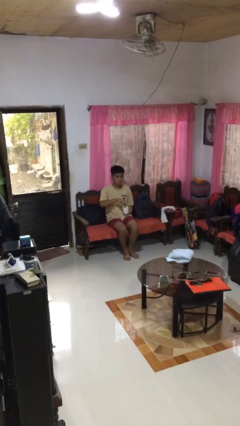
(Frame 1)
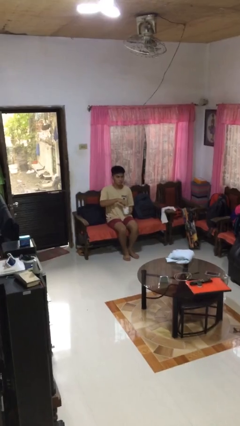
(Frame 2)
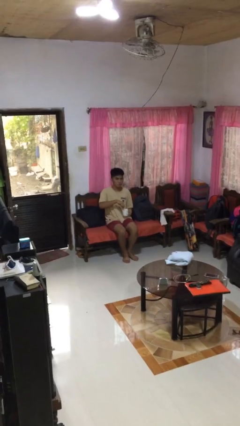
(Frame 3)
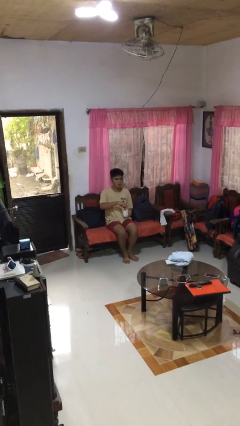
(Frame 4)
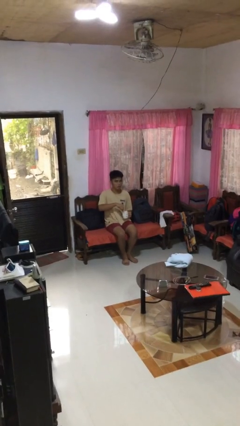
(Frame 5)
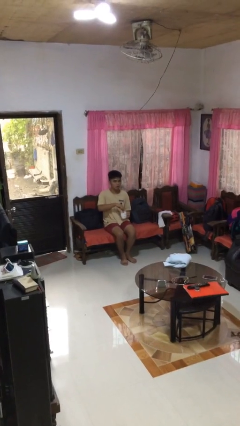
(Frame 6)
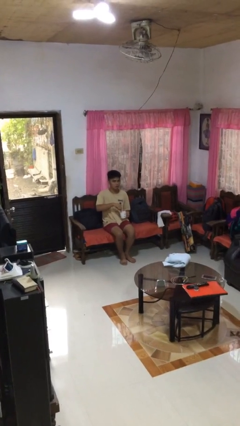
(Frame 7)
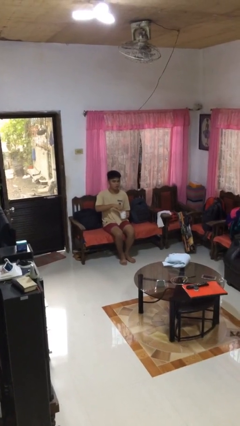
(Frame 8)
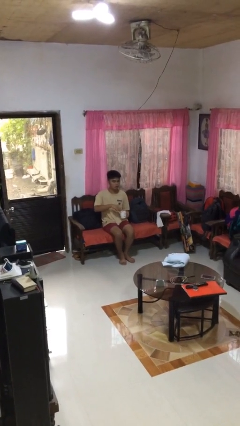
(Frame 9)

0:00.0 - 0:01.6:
person stirs mug

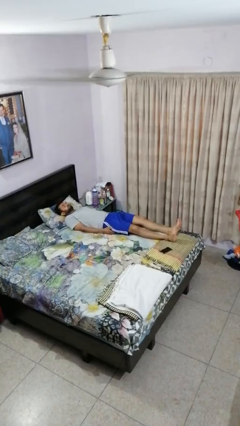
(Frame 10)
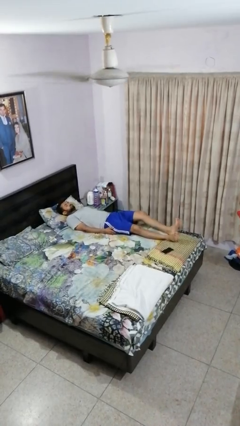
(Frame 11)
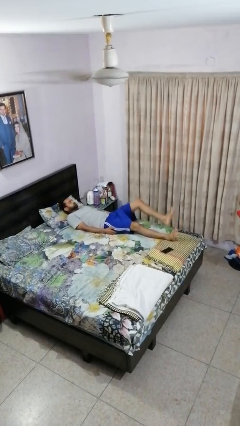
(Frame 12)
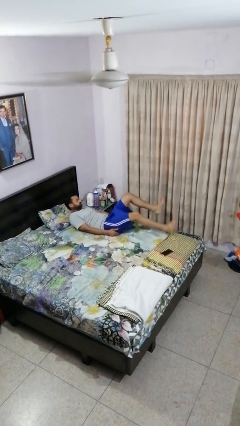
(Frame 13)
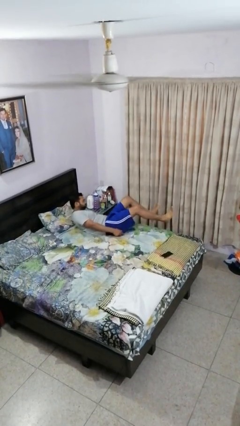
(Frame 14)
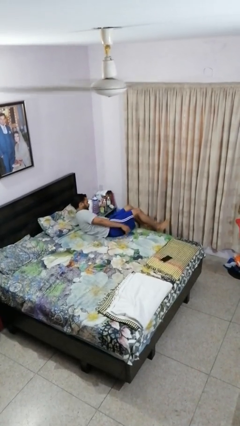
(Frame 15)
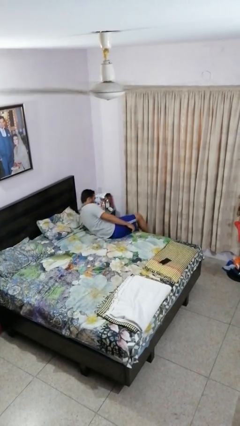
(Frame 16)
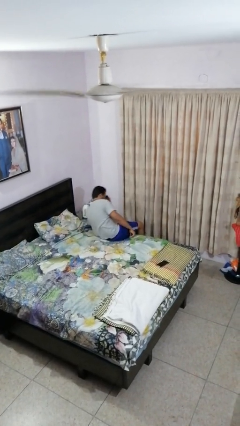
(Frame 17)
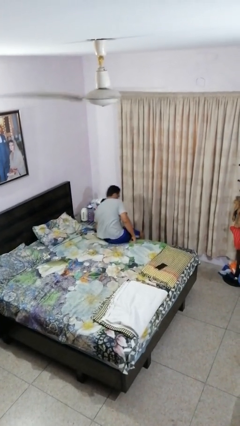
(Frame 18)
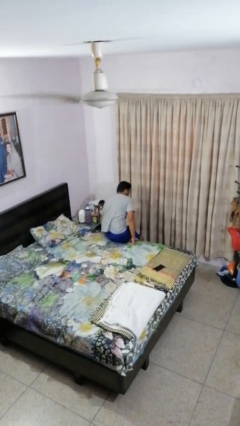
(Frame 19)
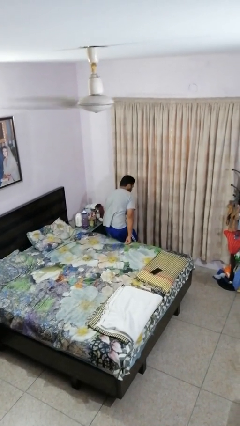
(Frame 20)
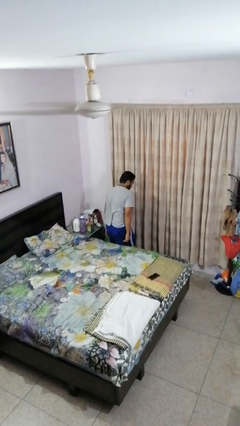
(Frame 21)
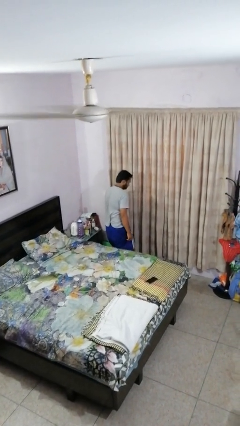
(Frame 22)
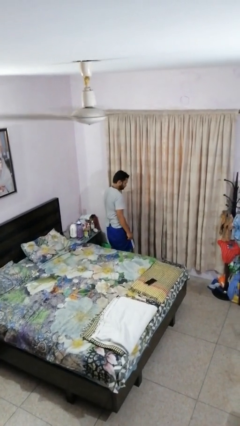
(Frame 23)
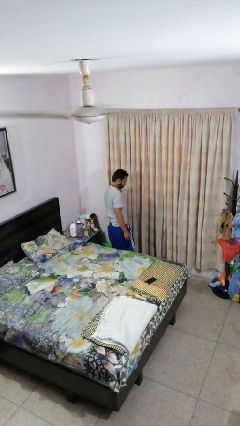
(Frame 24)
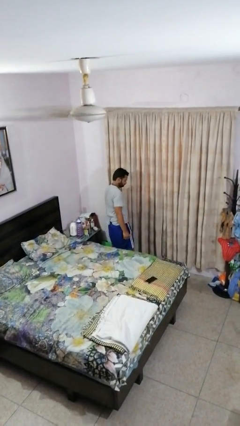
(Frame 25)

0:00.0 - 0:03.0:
person stands up

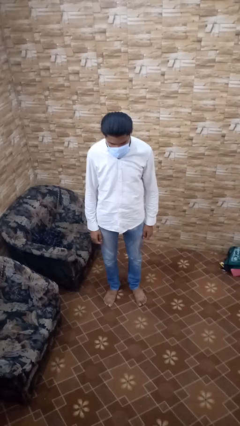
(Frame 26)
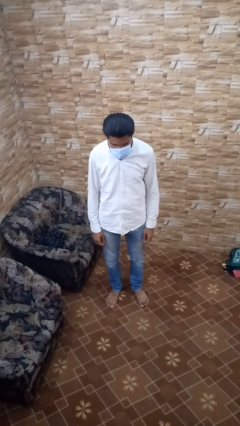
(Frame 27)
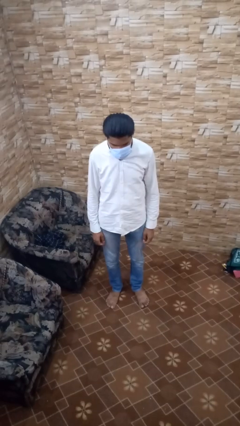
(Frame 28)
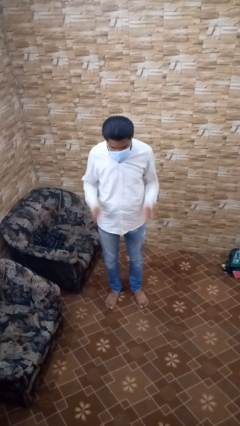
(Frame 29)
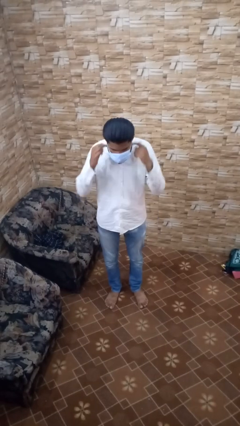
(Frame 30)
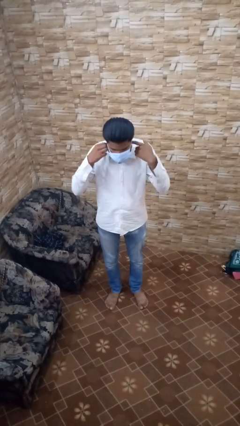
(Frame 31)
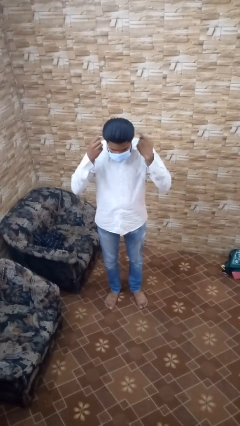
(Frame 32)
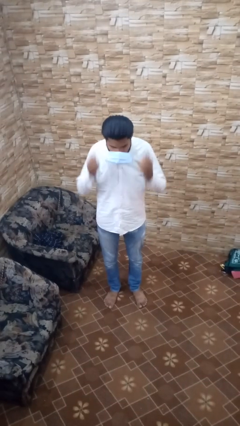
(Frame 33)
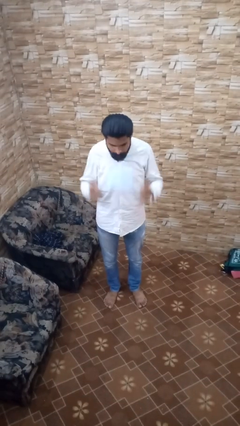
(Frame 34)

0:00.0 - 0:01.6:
person takes off facemask

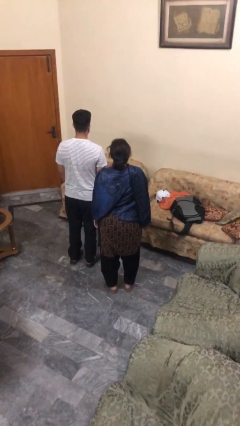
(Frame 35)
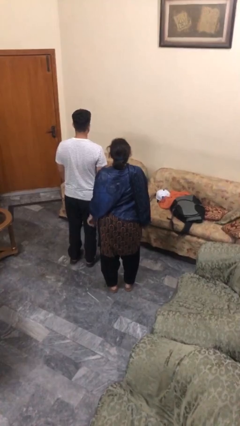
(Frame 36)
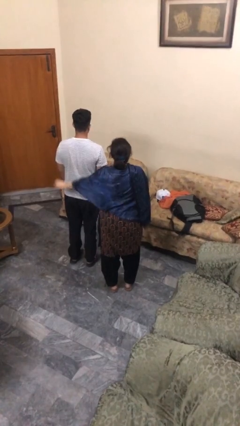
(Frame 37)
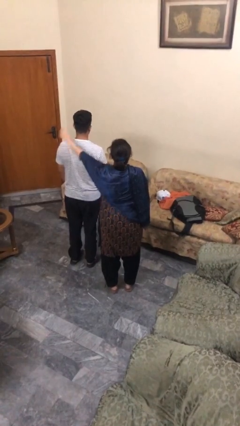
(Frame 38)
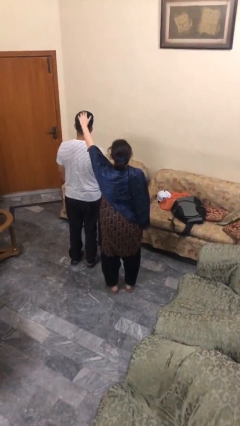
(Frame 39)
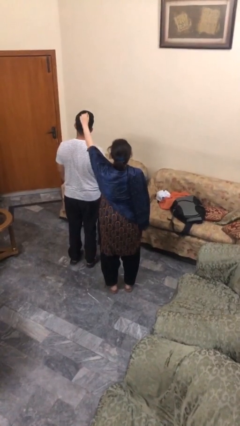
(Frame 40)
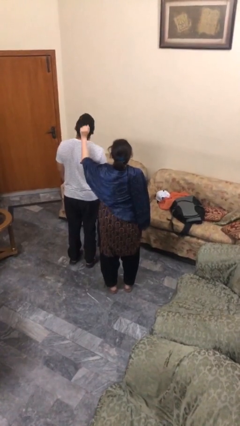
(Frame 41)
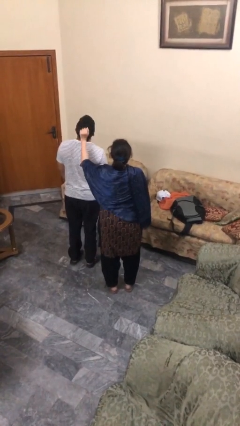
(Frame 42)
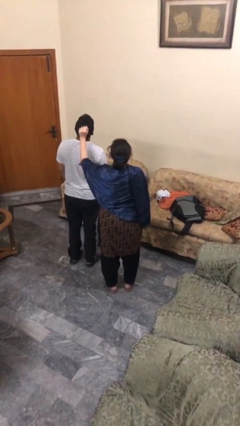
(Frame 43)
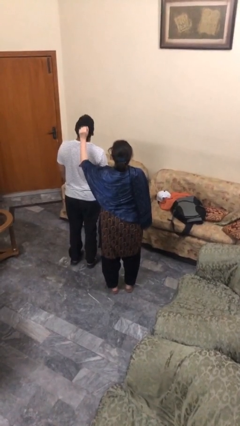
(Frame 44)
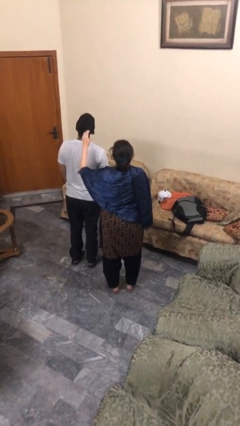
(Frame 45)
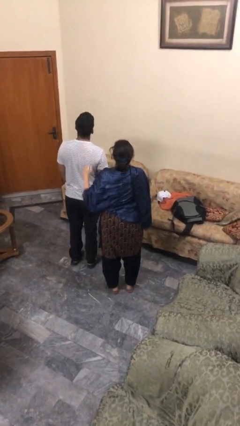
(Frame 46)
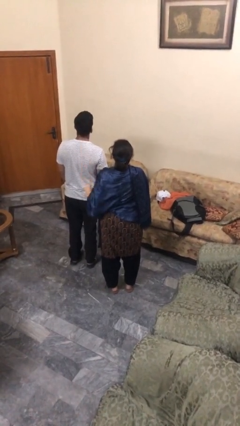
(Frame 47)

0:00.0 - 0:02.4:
person grabs person by hair

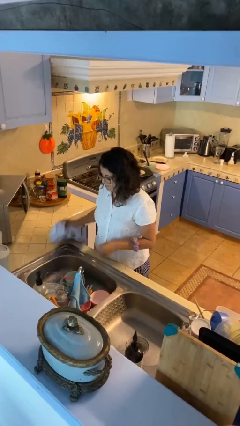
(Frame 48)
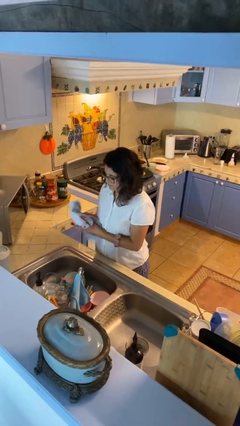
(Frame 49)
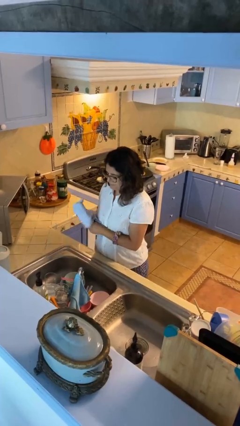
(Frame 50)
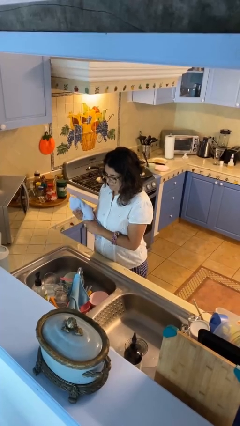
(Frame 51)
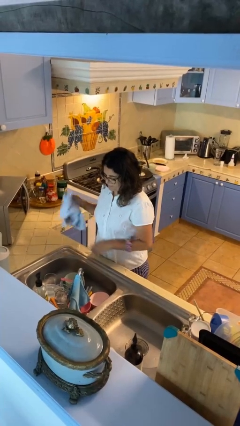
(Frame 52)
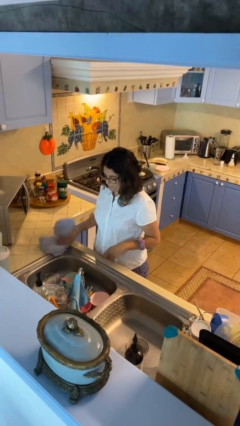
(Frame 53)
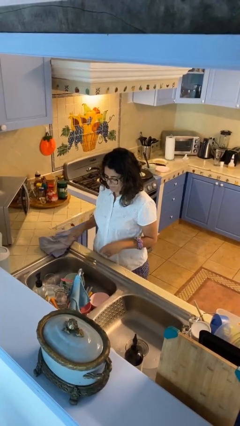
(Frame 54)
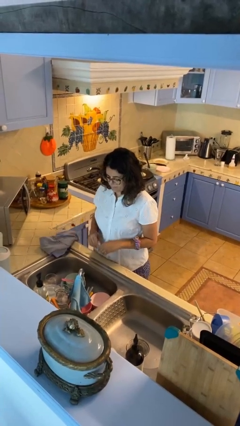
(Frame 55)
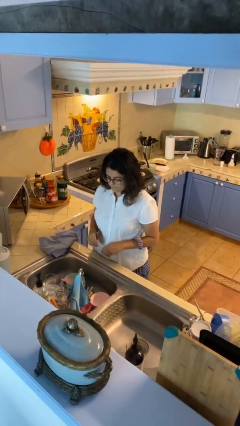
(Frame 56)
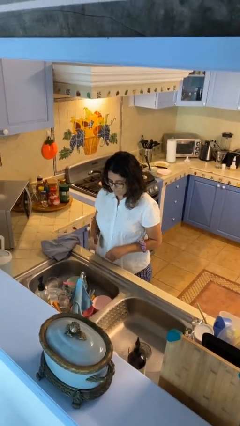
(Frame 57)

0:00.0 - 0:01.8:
person dries hands with towel

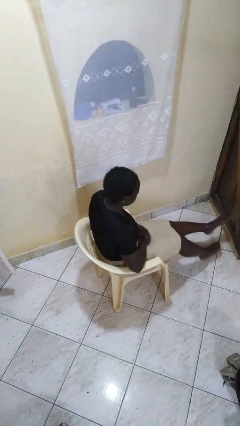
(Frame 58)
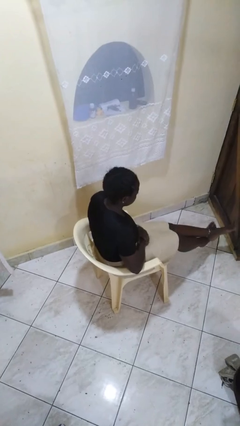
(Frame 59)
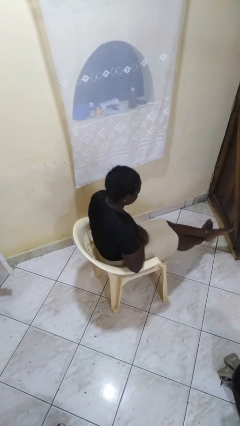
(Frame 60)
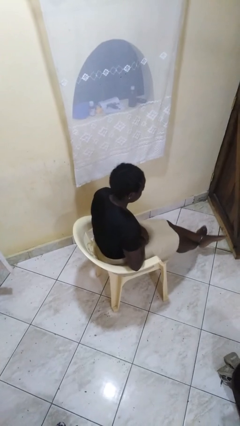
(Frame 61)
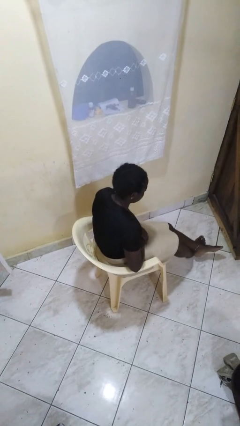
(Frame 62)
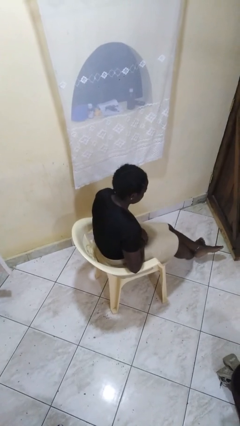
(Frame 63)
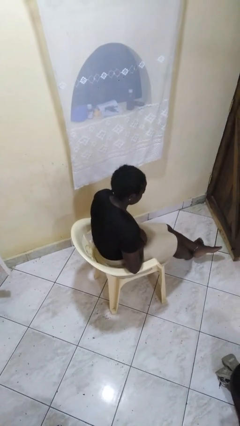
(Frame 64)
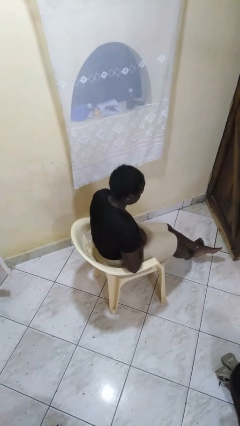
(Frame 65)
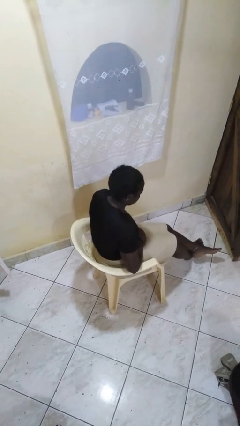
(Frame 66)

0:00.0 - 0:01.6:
person crosses legs

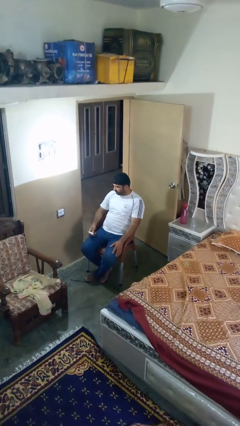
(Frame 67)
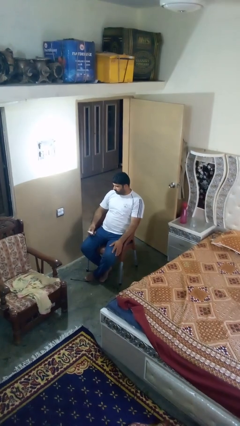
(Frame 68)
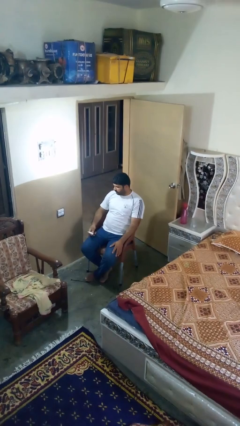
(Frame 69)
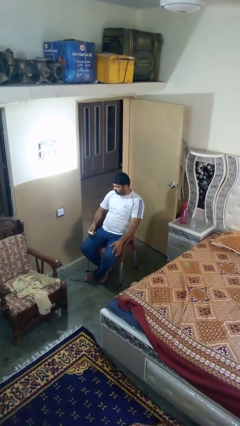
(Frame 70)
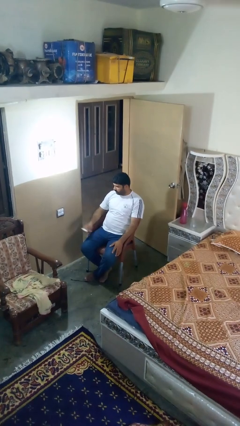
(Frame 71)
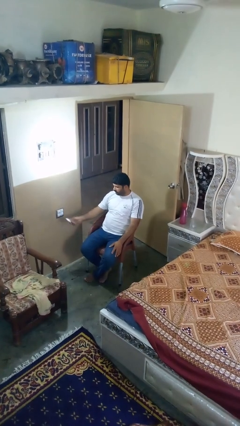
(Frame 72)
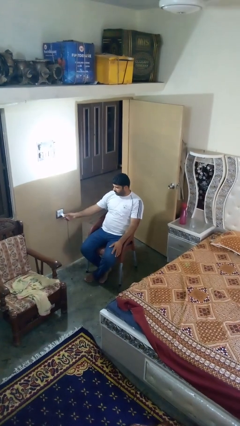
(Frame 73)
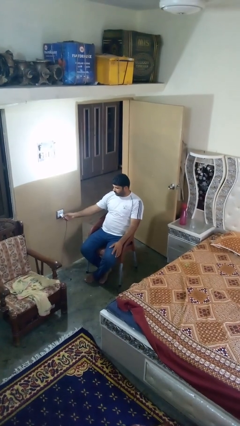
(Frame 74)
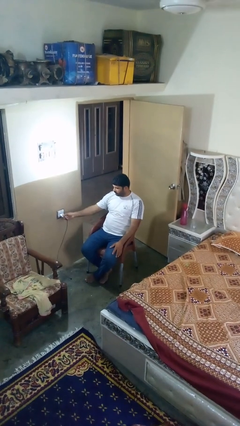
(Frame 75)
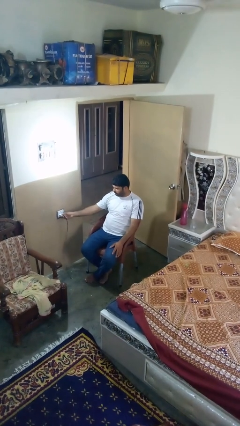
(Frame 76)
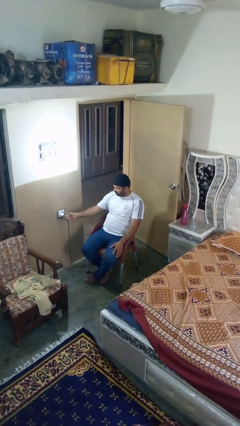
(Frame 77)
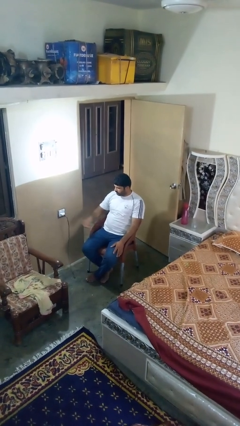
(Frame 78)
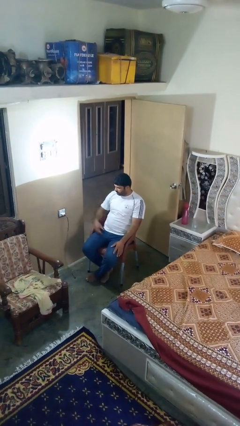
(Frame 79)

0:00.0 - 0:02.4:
person plugs into electrical socket

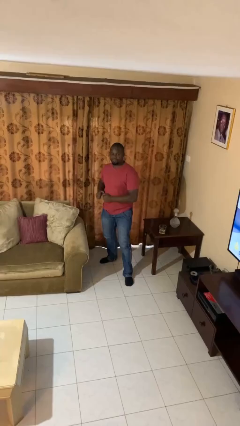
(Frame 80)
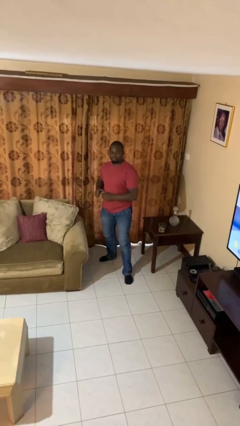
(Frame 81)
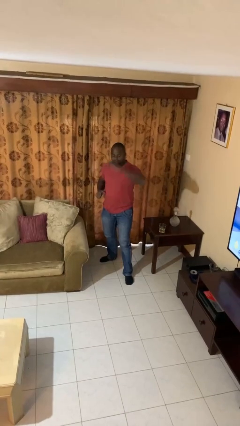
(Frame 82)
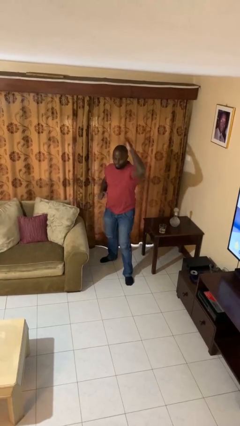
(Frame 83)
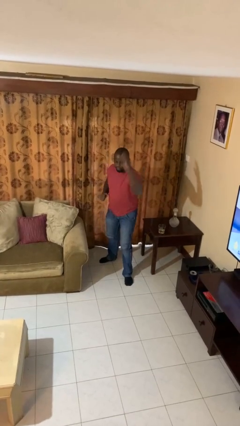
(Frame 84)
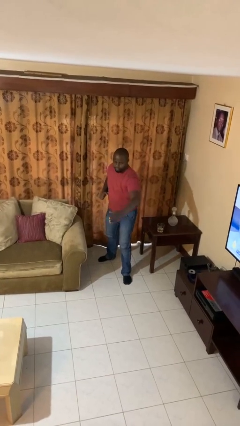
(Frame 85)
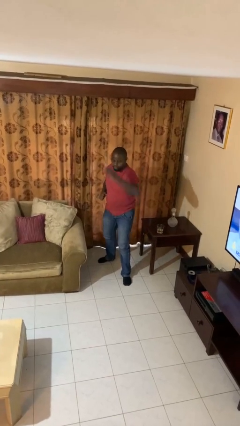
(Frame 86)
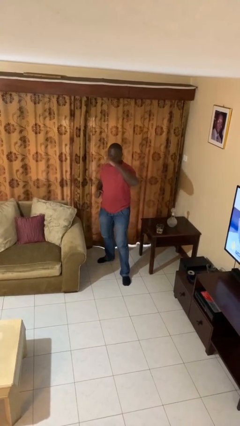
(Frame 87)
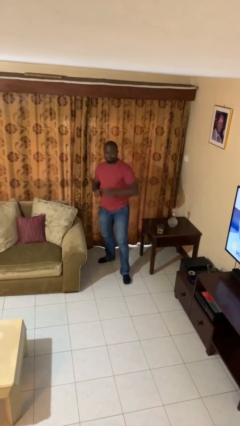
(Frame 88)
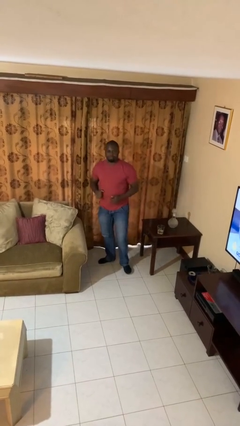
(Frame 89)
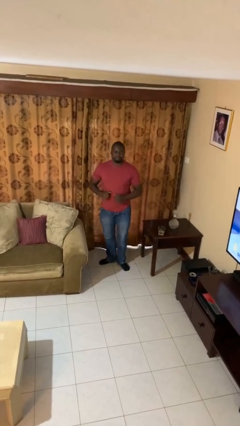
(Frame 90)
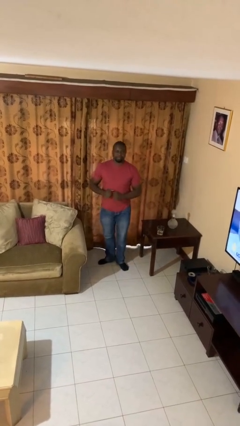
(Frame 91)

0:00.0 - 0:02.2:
person karate chop
